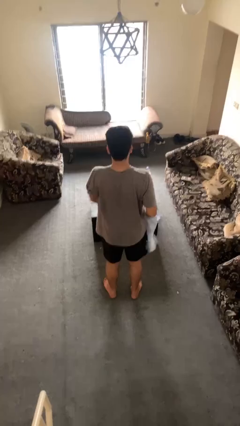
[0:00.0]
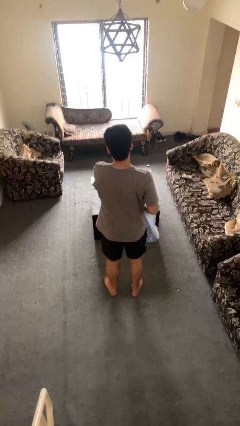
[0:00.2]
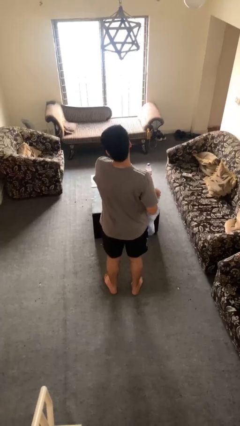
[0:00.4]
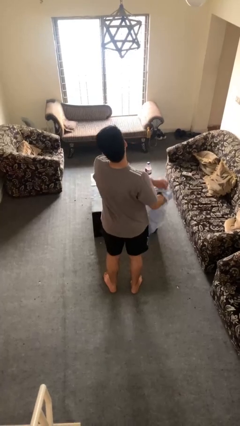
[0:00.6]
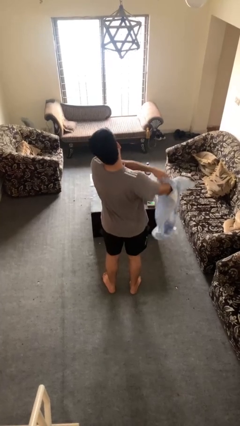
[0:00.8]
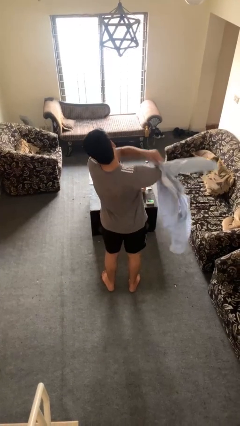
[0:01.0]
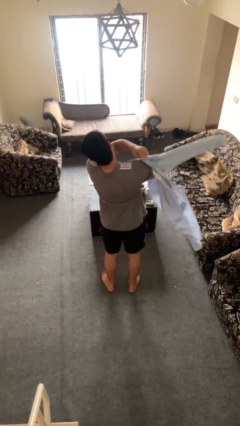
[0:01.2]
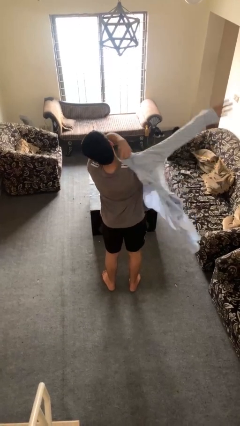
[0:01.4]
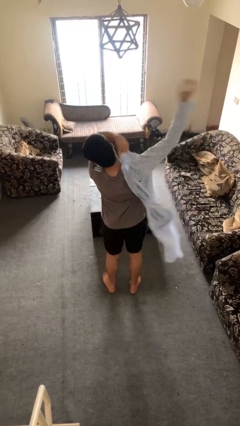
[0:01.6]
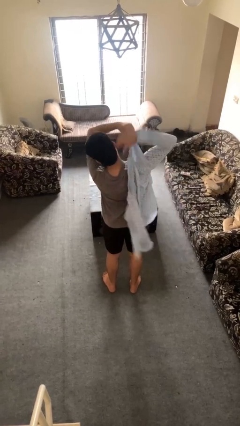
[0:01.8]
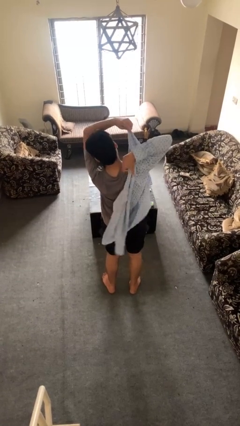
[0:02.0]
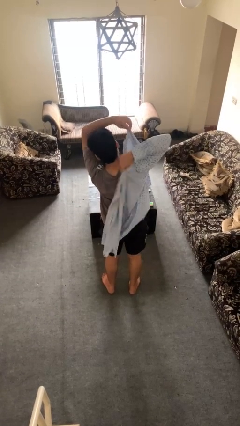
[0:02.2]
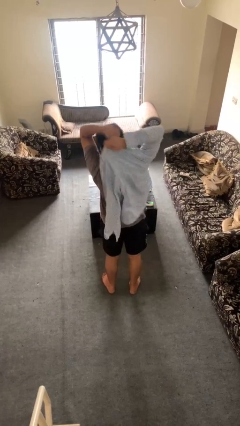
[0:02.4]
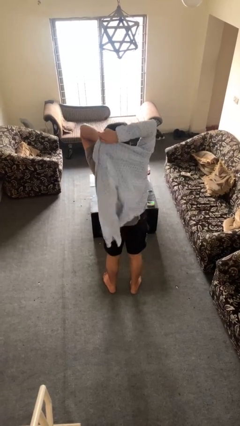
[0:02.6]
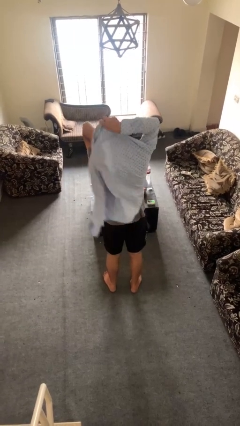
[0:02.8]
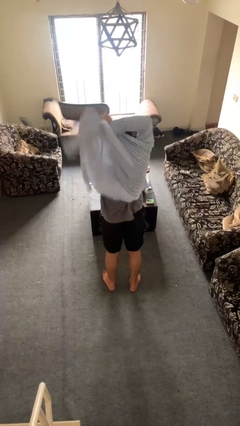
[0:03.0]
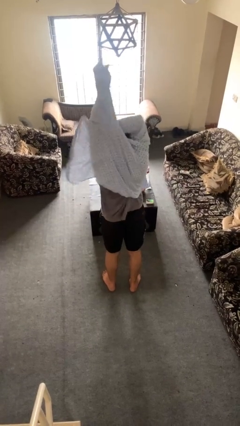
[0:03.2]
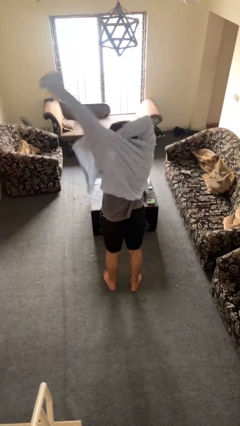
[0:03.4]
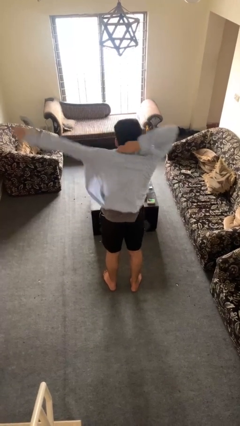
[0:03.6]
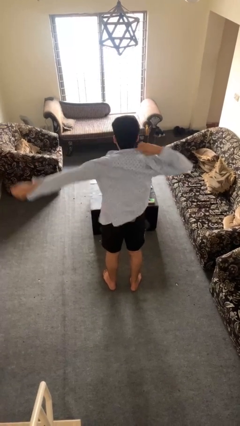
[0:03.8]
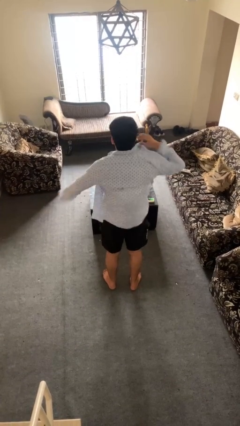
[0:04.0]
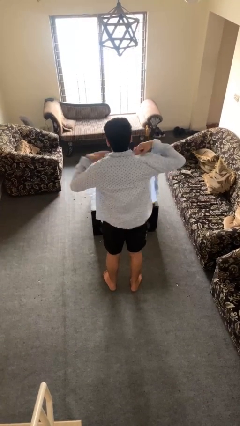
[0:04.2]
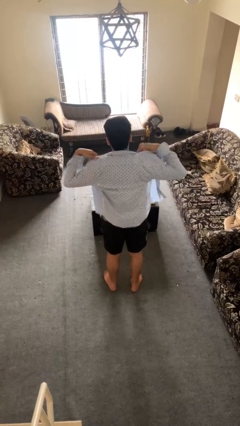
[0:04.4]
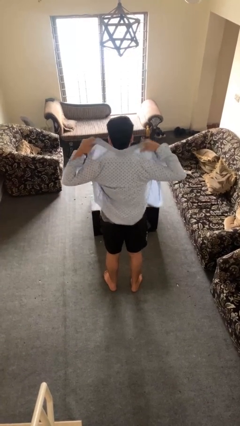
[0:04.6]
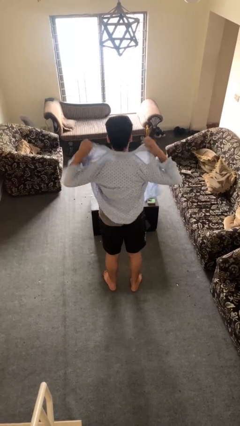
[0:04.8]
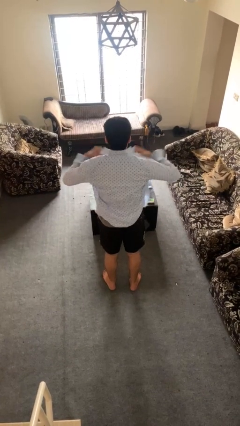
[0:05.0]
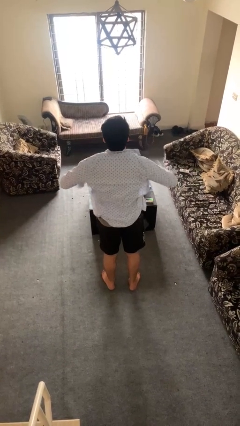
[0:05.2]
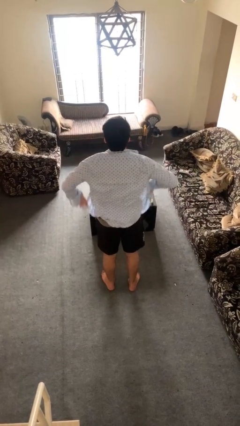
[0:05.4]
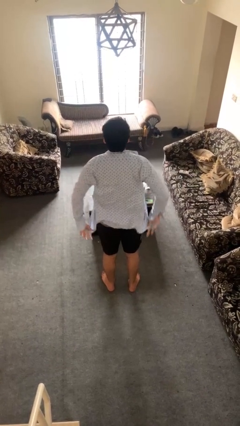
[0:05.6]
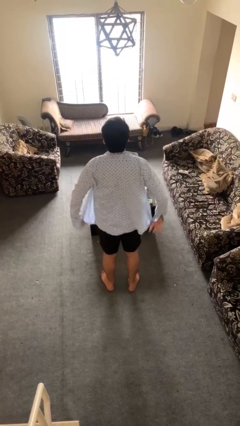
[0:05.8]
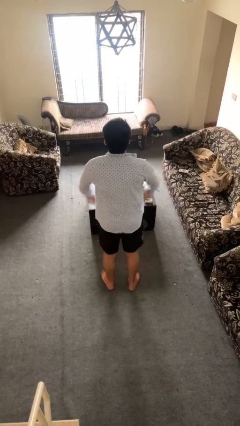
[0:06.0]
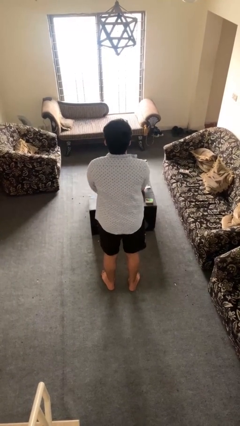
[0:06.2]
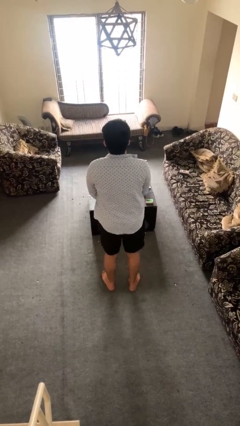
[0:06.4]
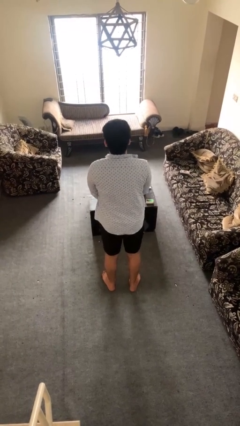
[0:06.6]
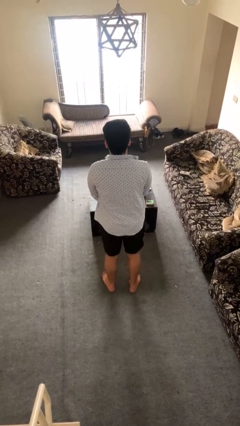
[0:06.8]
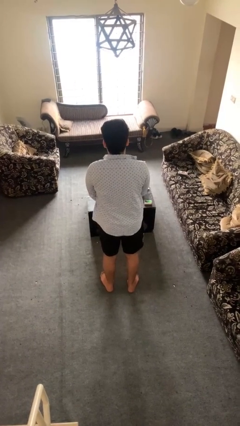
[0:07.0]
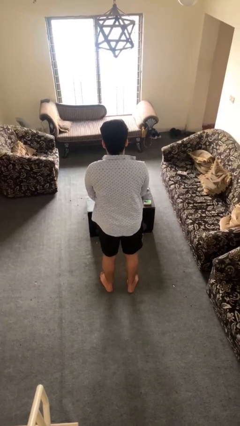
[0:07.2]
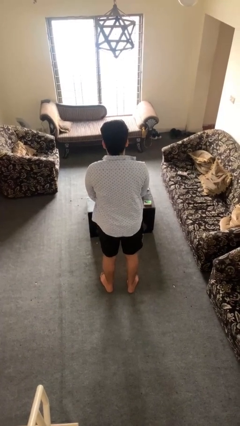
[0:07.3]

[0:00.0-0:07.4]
person puts on shirt

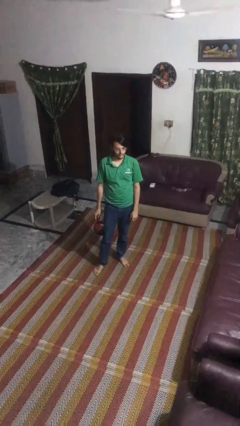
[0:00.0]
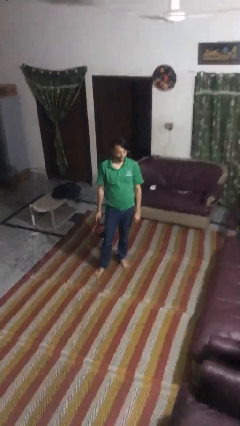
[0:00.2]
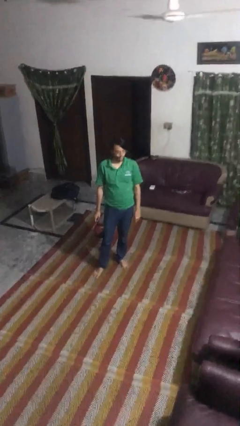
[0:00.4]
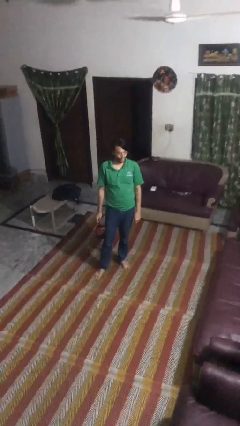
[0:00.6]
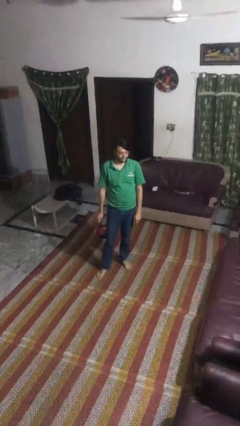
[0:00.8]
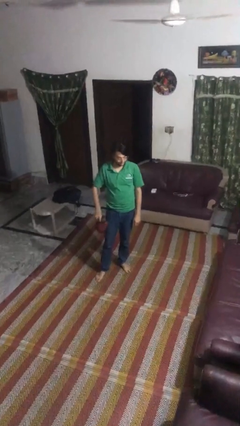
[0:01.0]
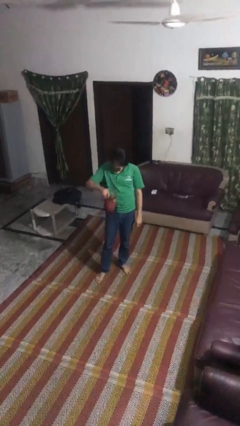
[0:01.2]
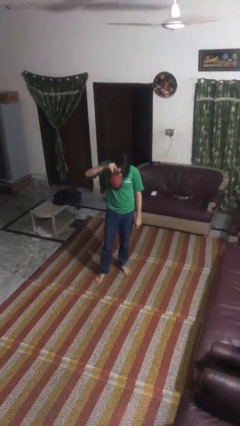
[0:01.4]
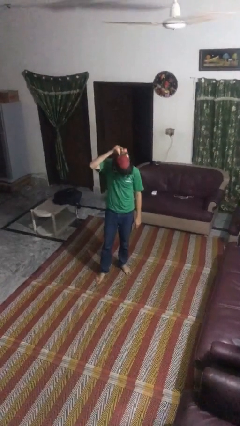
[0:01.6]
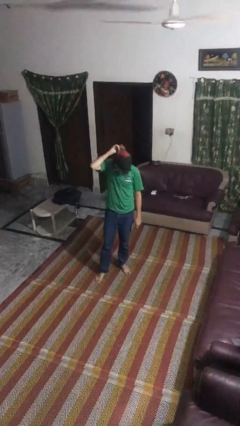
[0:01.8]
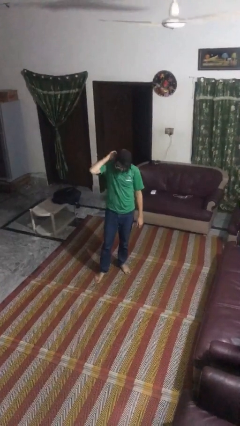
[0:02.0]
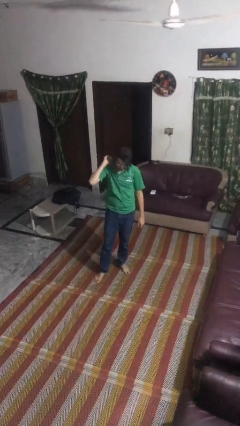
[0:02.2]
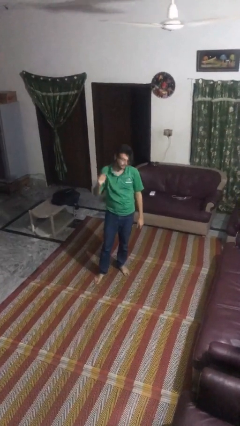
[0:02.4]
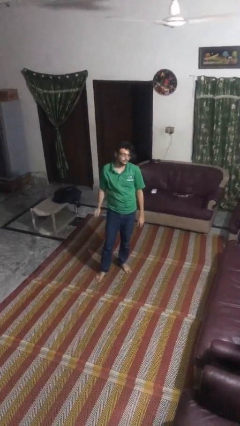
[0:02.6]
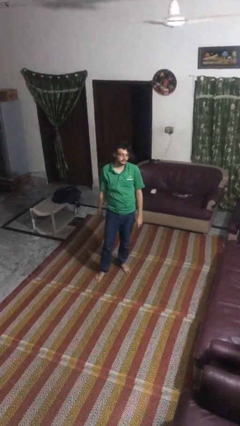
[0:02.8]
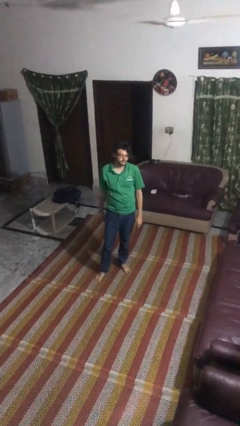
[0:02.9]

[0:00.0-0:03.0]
person puts on hat

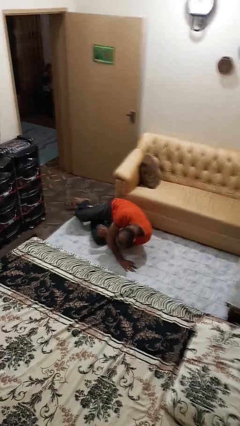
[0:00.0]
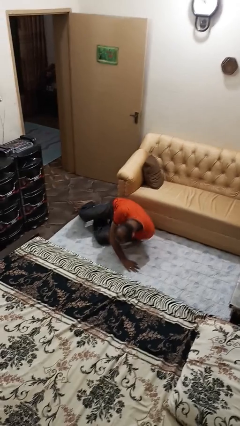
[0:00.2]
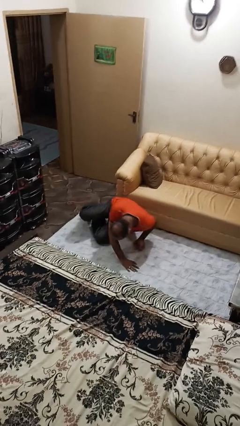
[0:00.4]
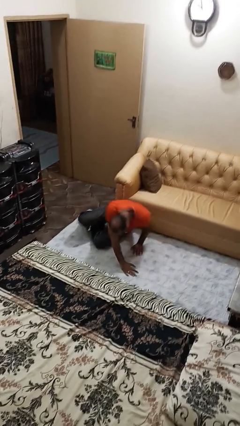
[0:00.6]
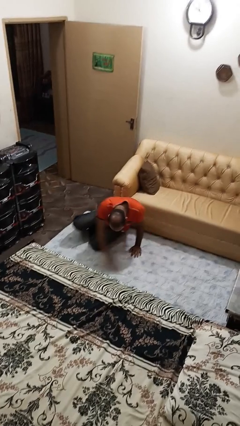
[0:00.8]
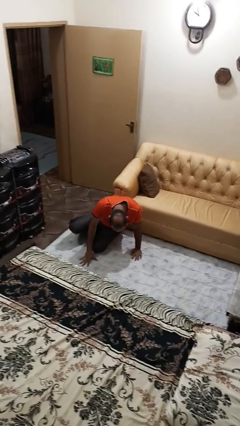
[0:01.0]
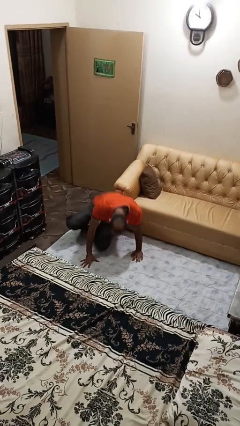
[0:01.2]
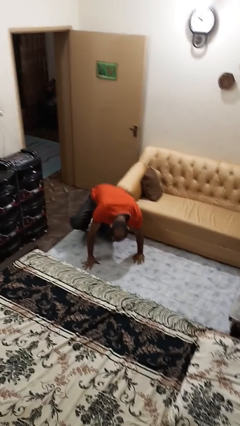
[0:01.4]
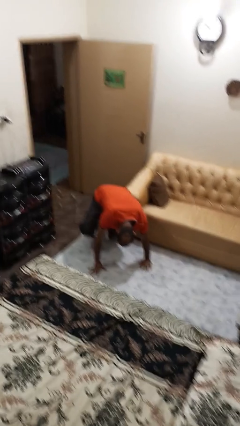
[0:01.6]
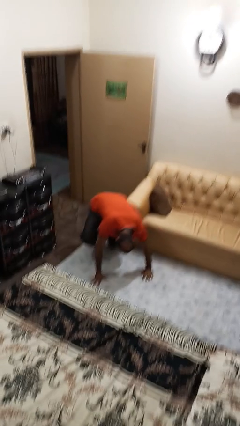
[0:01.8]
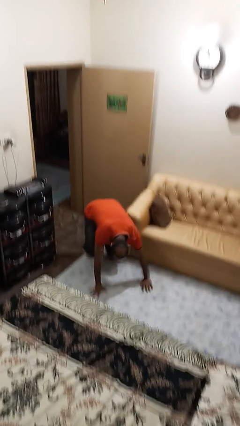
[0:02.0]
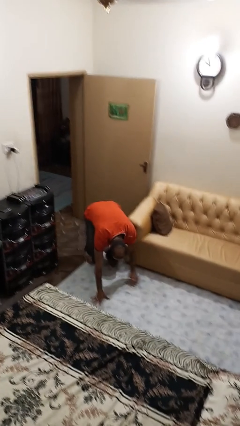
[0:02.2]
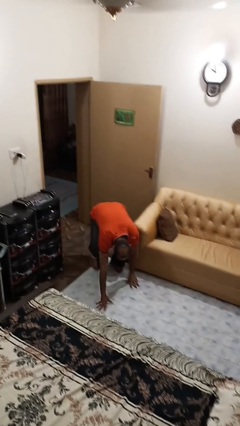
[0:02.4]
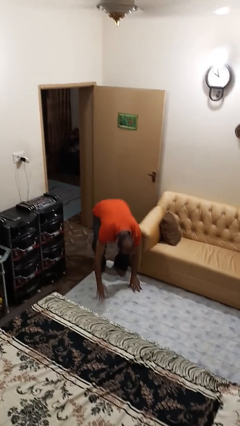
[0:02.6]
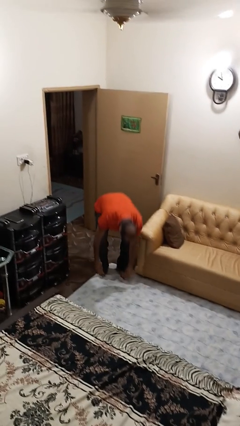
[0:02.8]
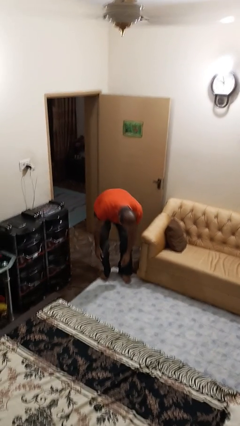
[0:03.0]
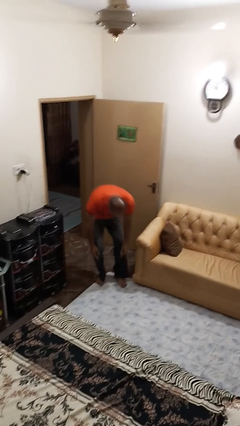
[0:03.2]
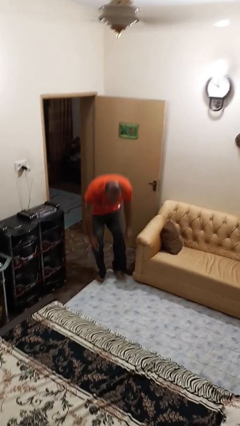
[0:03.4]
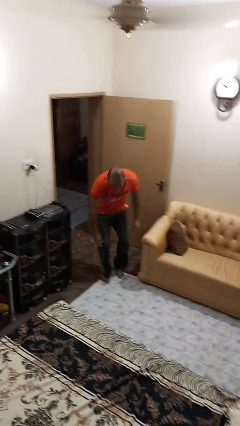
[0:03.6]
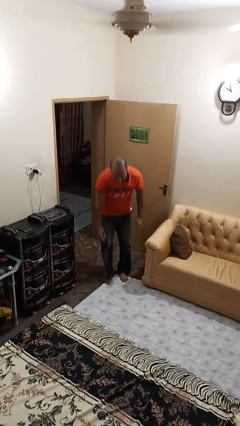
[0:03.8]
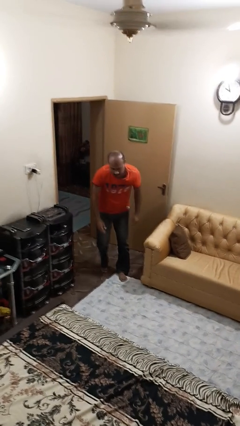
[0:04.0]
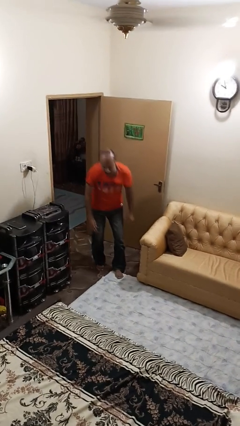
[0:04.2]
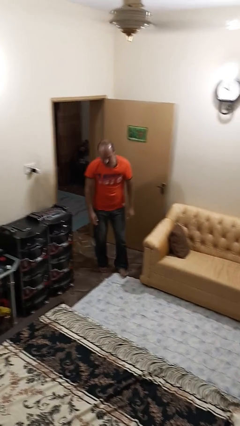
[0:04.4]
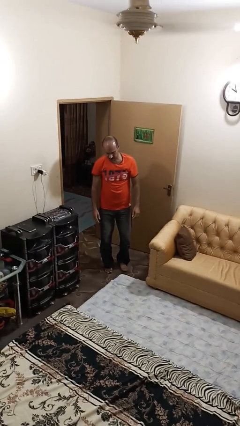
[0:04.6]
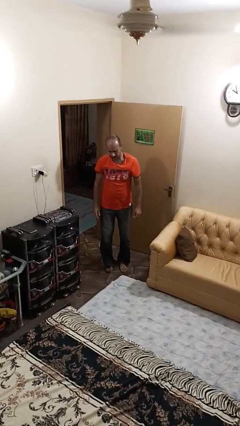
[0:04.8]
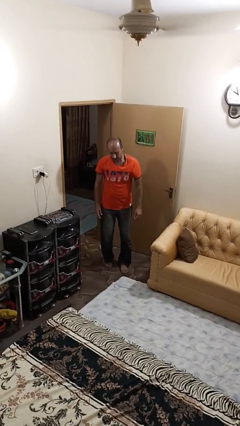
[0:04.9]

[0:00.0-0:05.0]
person stands up from floor

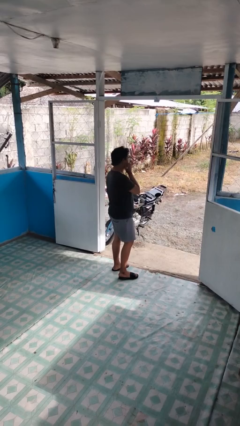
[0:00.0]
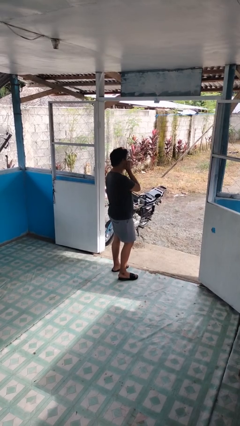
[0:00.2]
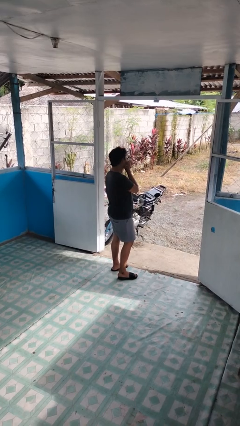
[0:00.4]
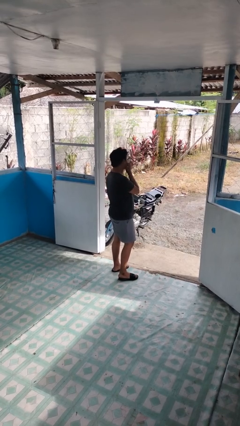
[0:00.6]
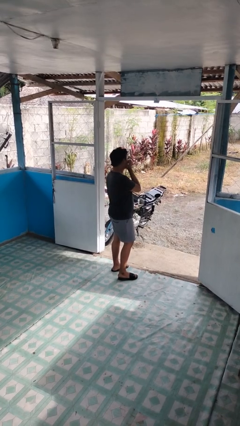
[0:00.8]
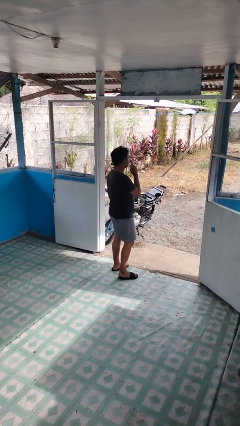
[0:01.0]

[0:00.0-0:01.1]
person scratches face

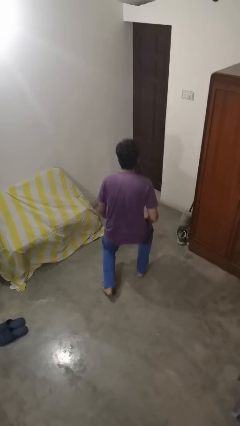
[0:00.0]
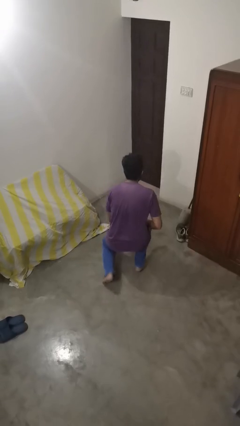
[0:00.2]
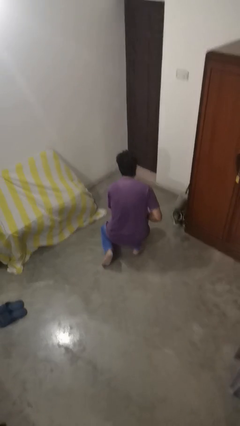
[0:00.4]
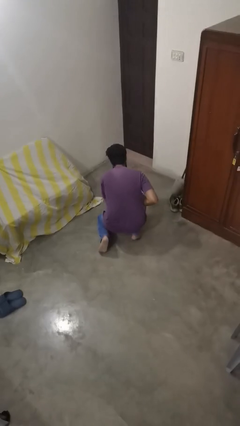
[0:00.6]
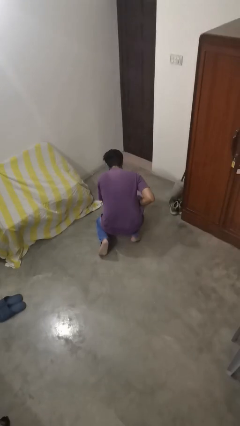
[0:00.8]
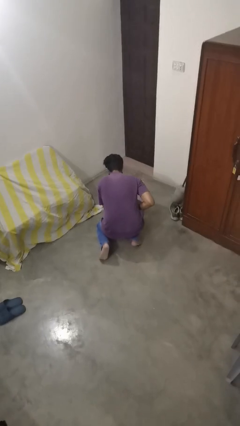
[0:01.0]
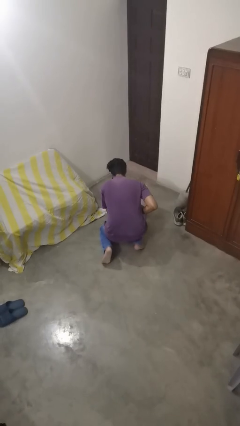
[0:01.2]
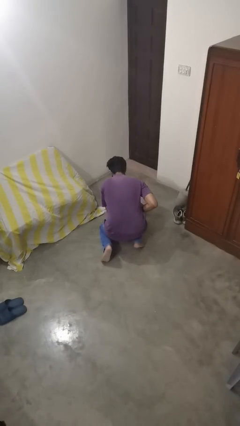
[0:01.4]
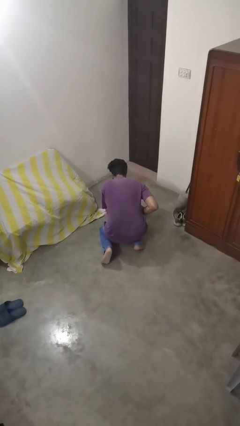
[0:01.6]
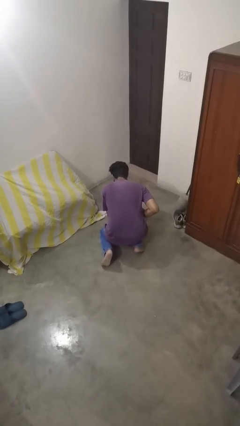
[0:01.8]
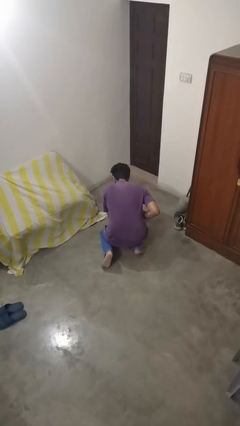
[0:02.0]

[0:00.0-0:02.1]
person kneels
